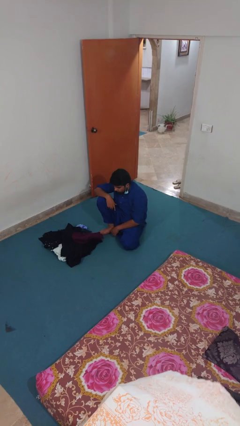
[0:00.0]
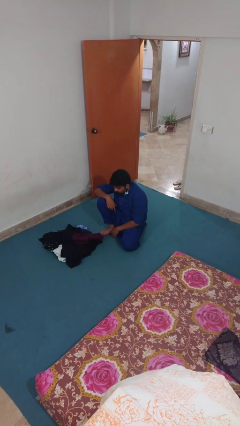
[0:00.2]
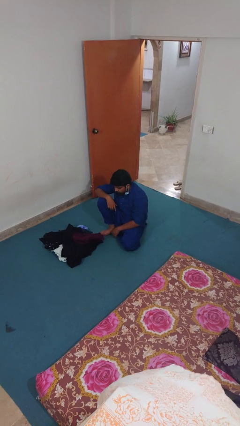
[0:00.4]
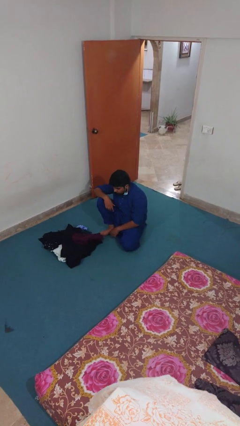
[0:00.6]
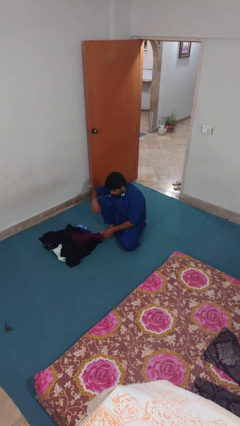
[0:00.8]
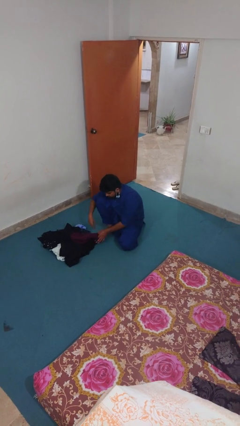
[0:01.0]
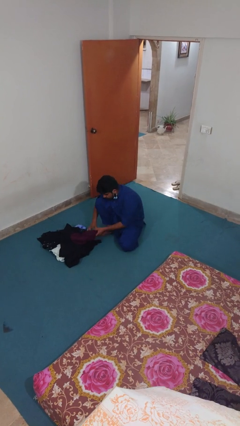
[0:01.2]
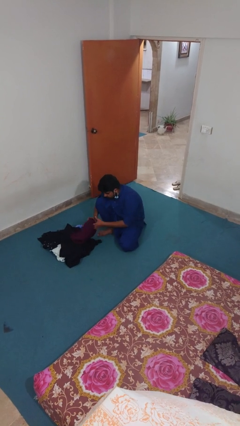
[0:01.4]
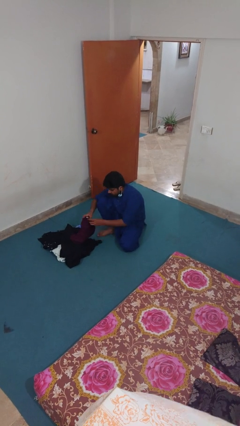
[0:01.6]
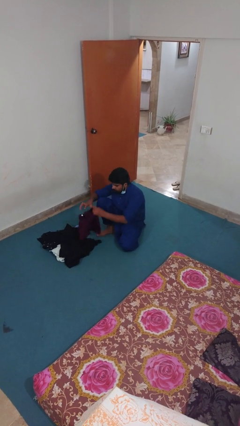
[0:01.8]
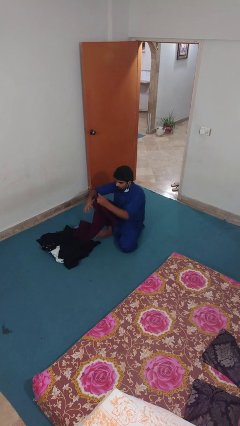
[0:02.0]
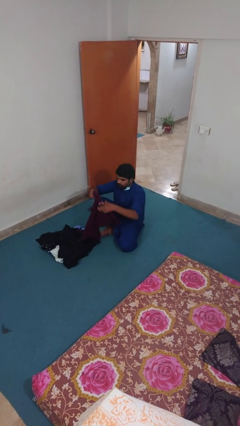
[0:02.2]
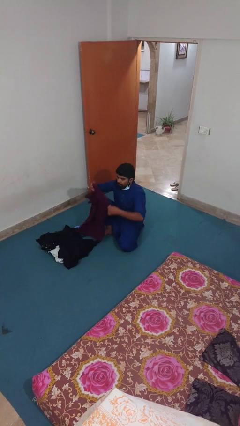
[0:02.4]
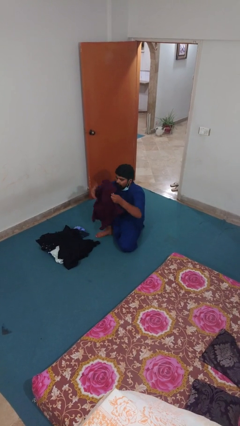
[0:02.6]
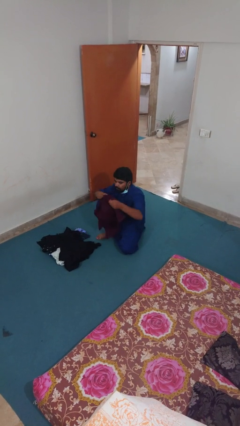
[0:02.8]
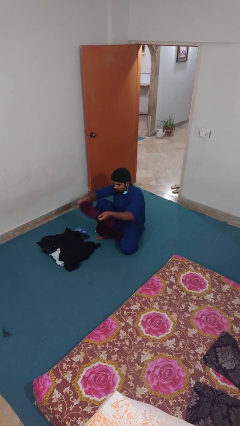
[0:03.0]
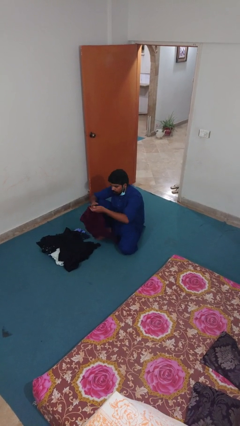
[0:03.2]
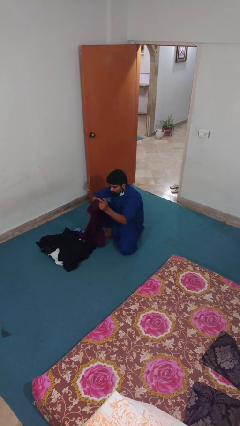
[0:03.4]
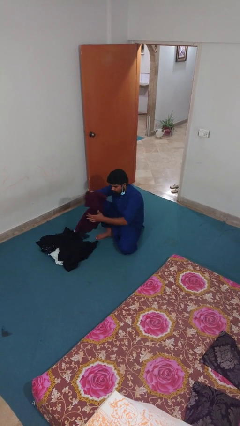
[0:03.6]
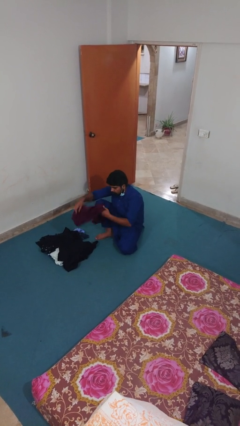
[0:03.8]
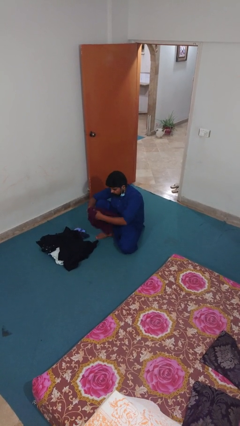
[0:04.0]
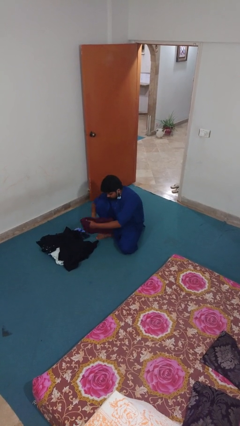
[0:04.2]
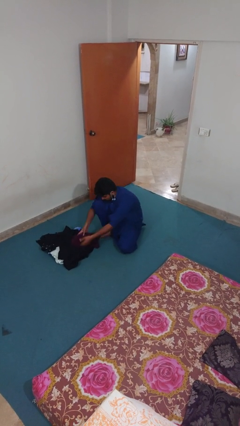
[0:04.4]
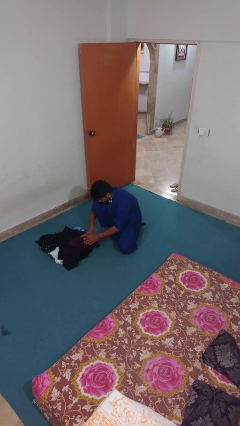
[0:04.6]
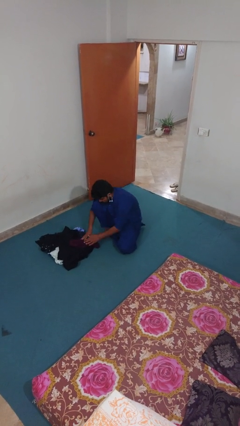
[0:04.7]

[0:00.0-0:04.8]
person folds shirt

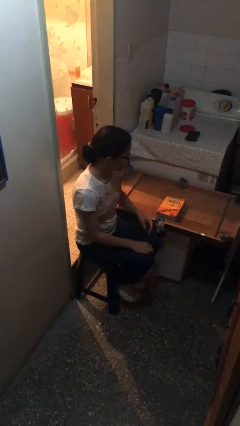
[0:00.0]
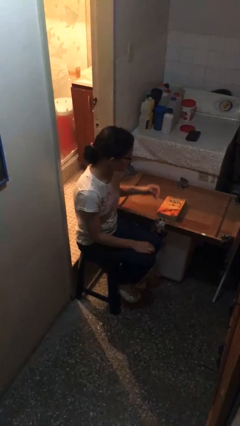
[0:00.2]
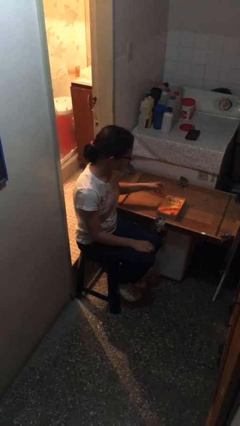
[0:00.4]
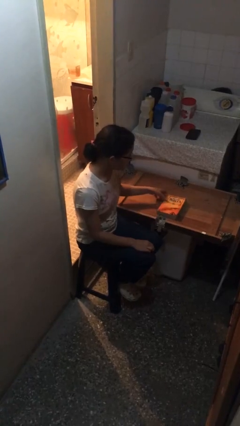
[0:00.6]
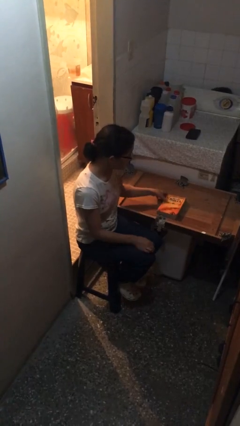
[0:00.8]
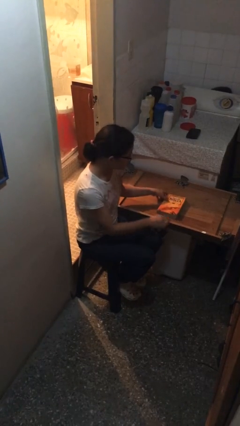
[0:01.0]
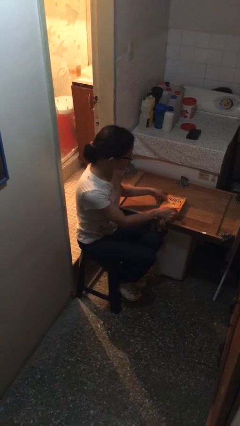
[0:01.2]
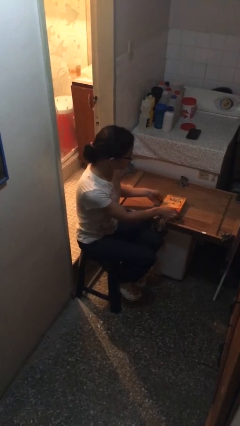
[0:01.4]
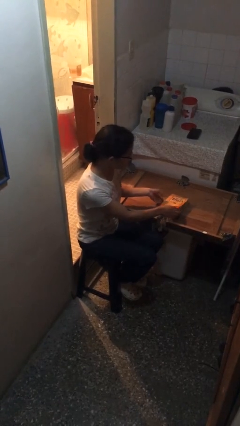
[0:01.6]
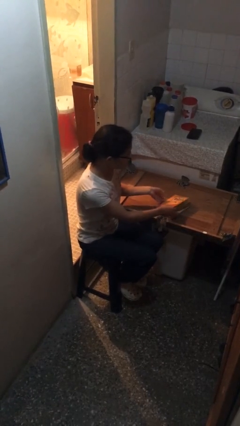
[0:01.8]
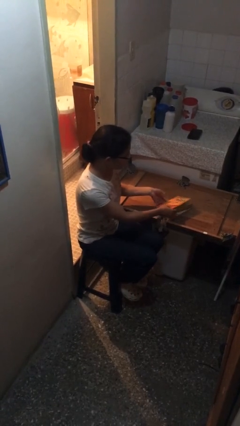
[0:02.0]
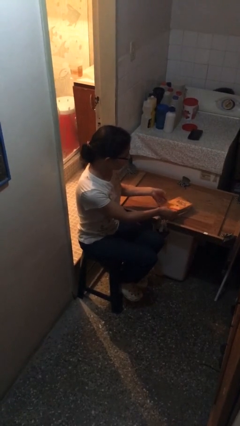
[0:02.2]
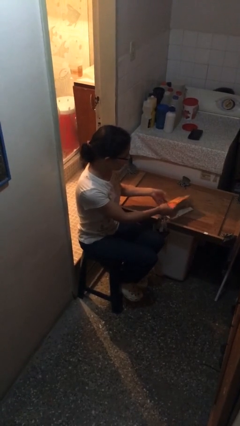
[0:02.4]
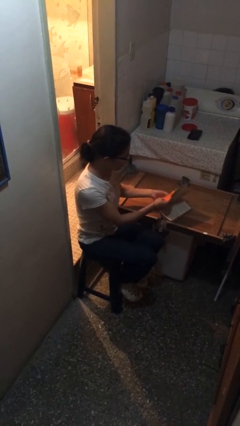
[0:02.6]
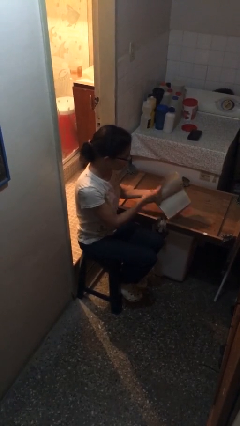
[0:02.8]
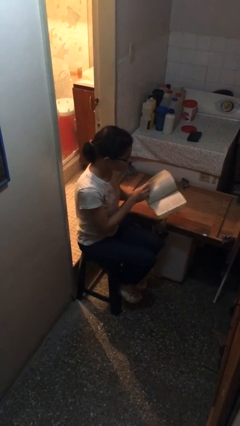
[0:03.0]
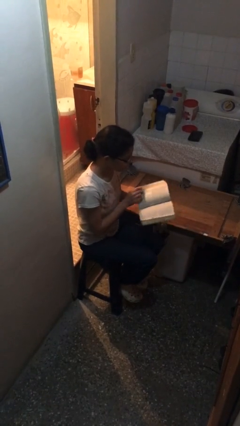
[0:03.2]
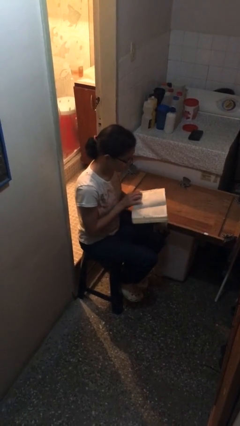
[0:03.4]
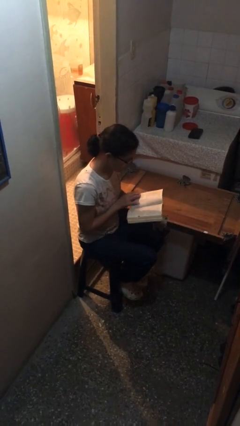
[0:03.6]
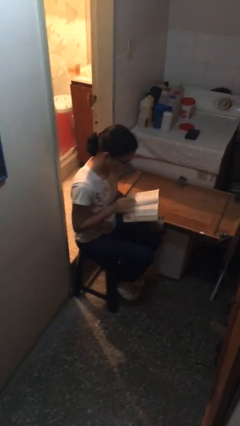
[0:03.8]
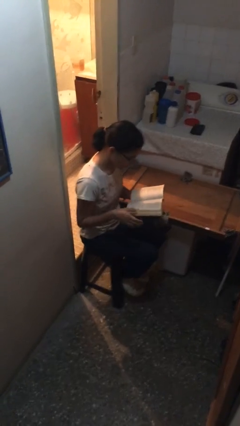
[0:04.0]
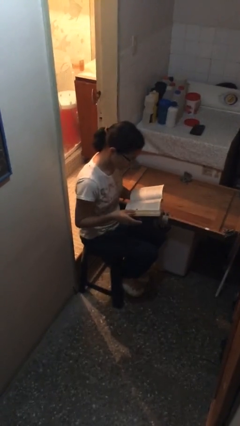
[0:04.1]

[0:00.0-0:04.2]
person picks up object from table

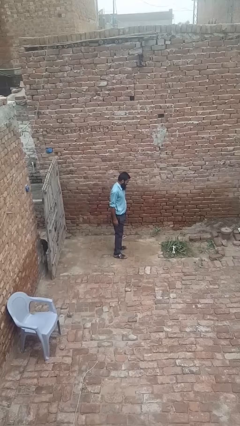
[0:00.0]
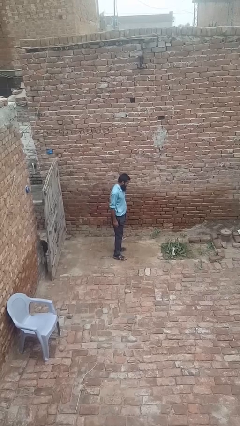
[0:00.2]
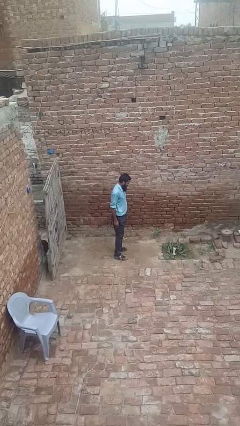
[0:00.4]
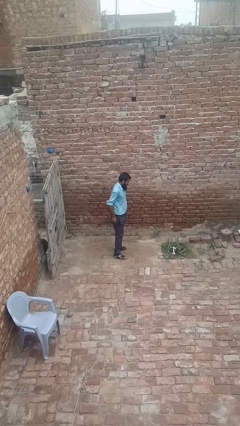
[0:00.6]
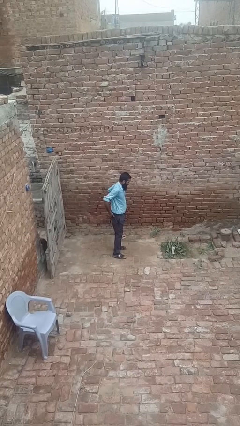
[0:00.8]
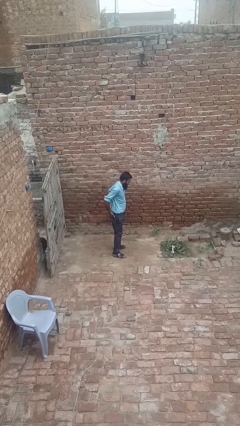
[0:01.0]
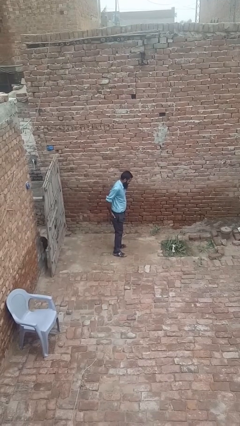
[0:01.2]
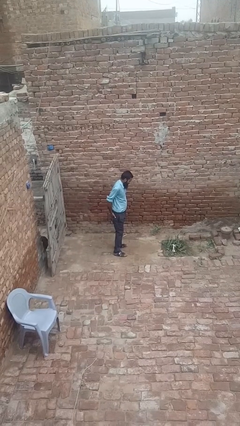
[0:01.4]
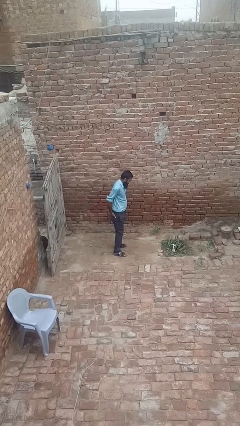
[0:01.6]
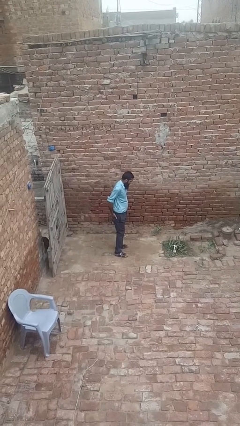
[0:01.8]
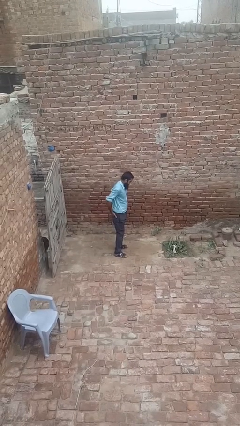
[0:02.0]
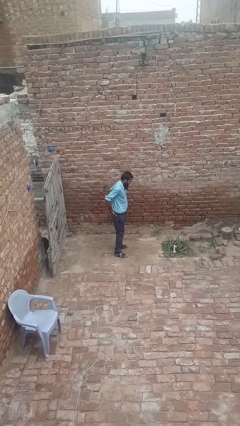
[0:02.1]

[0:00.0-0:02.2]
person puts hands in back pockets

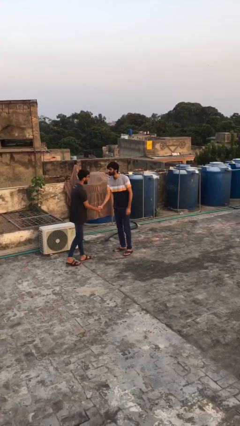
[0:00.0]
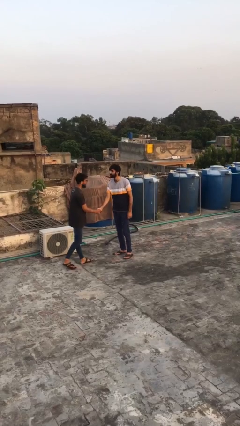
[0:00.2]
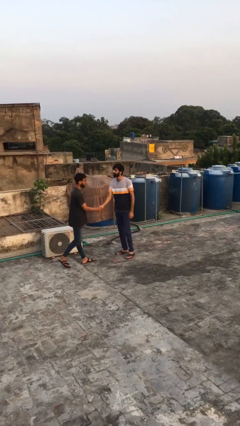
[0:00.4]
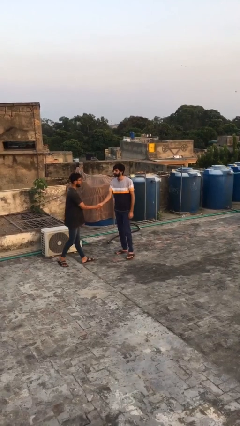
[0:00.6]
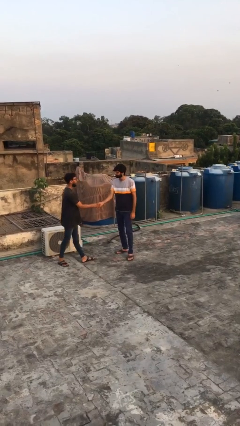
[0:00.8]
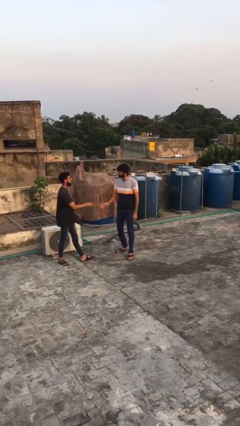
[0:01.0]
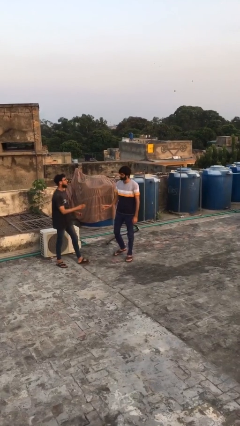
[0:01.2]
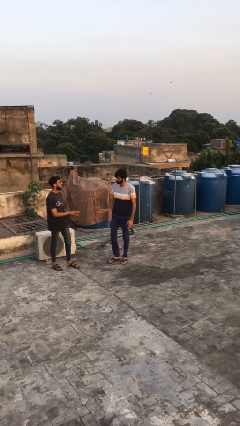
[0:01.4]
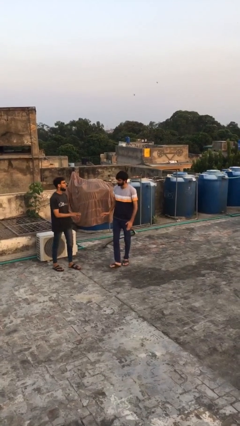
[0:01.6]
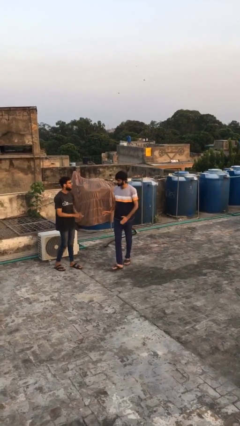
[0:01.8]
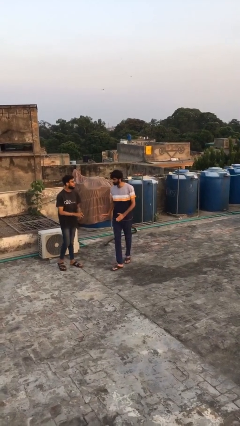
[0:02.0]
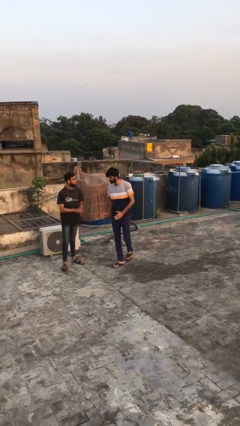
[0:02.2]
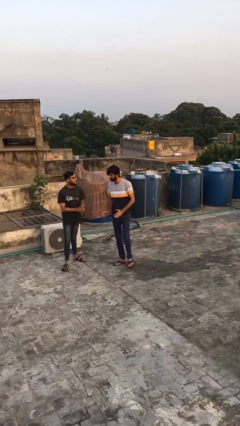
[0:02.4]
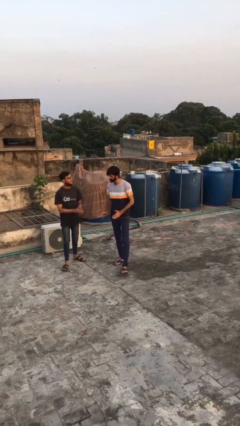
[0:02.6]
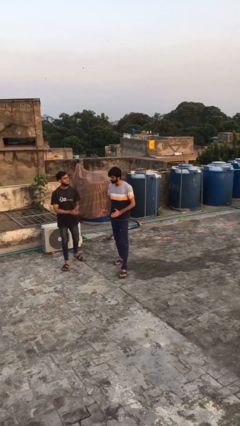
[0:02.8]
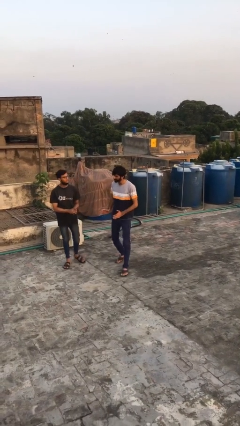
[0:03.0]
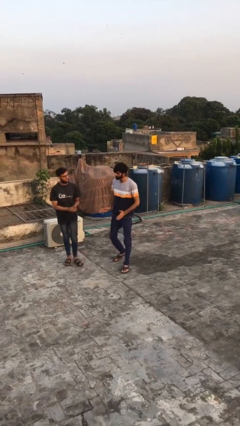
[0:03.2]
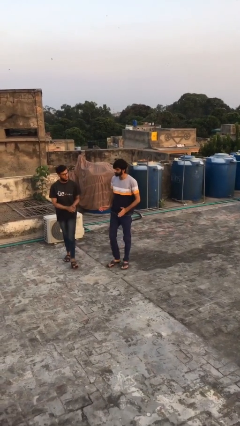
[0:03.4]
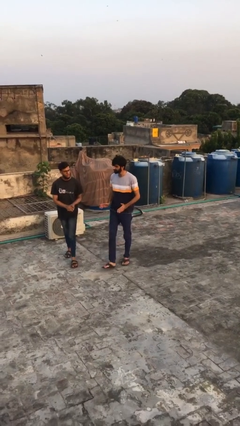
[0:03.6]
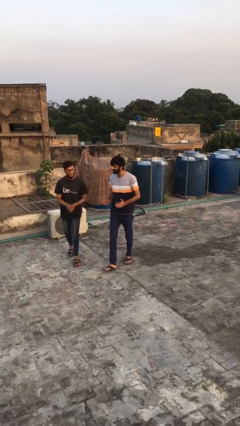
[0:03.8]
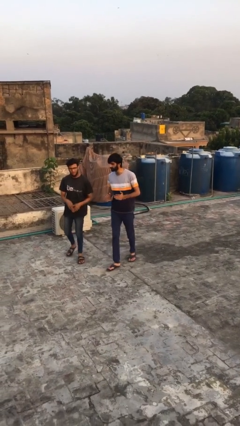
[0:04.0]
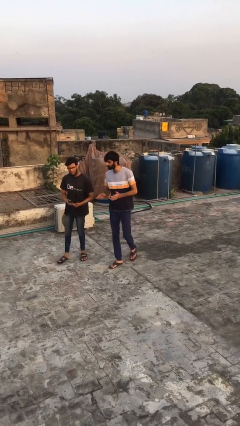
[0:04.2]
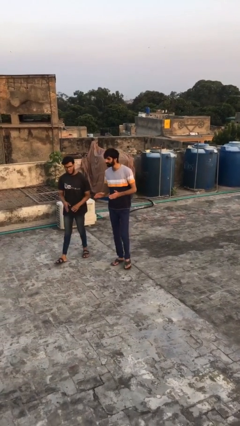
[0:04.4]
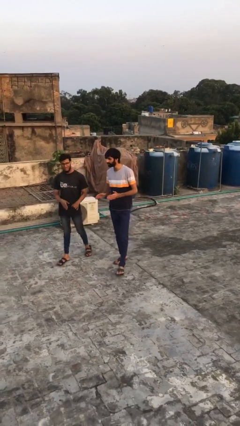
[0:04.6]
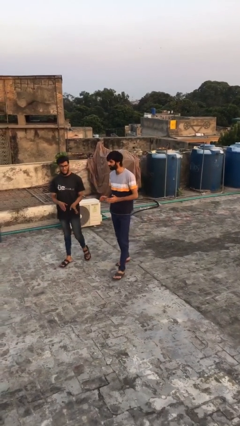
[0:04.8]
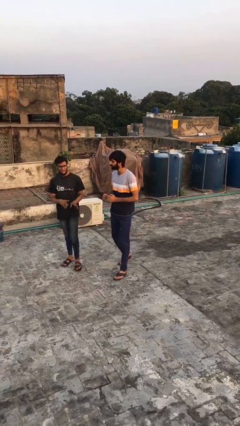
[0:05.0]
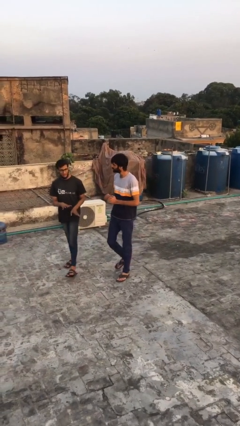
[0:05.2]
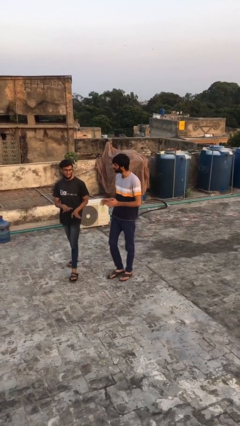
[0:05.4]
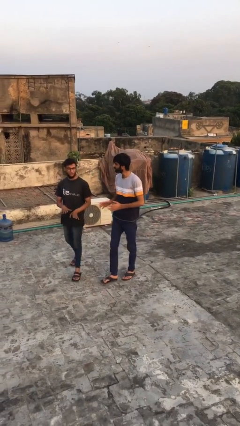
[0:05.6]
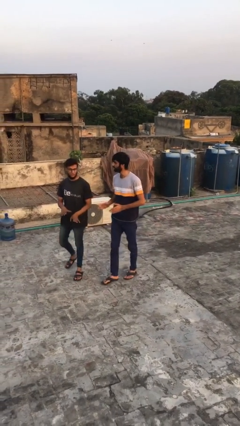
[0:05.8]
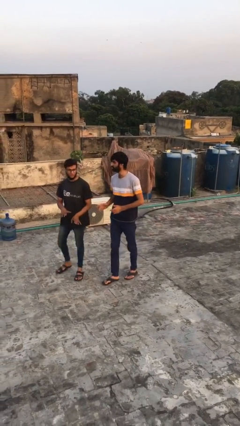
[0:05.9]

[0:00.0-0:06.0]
person talks to person

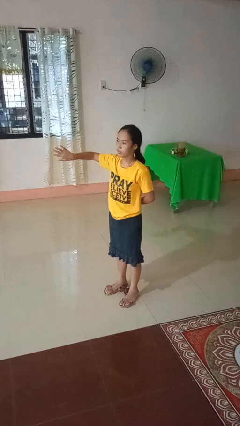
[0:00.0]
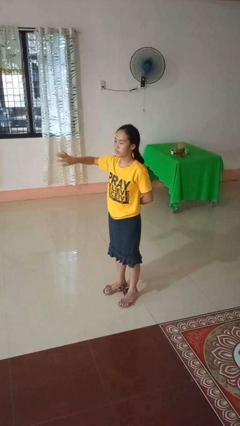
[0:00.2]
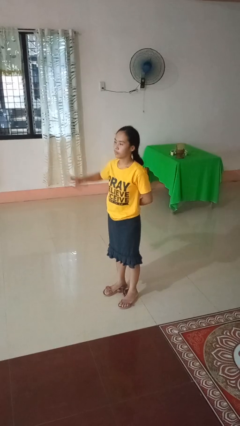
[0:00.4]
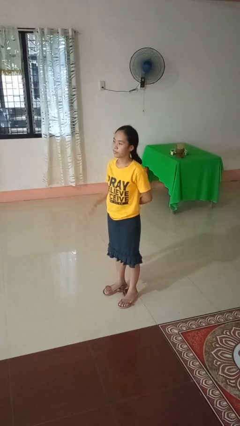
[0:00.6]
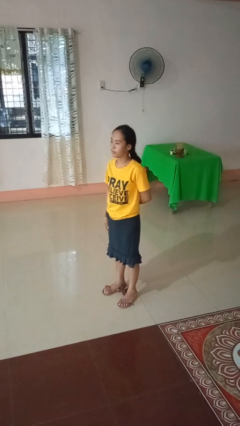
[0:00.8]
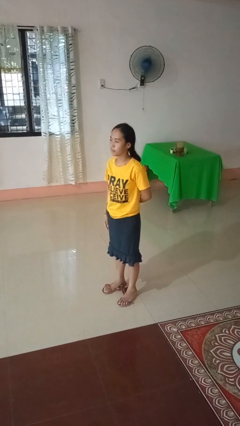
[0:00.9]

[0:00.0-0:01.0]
person gestures swipe right
